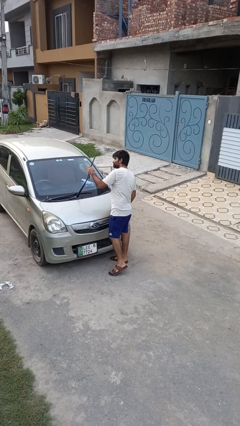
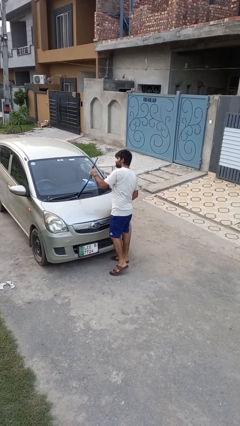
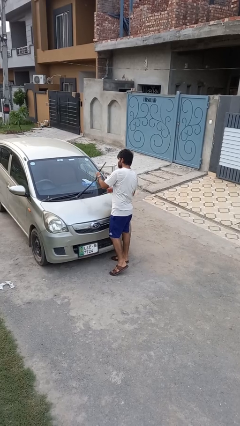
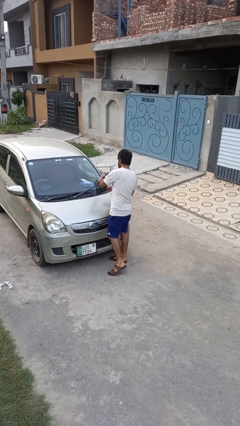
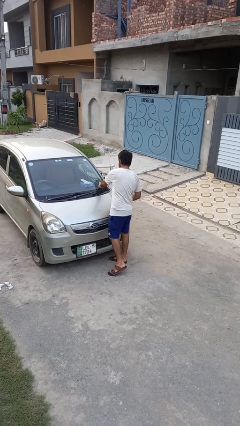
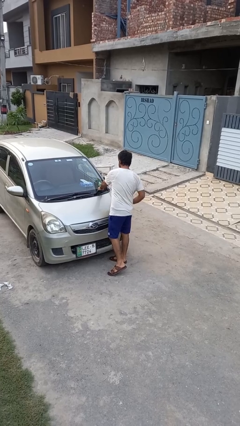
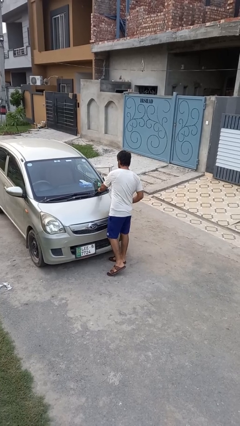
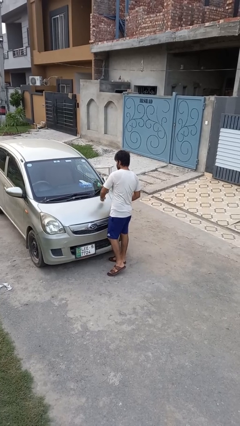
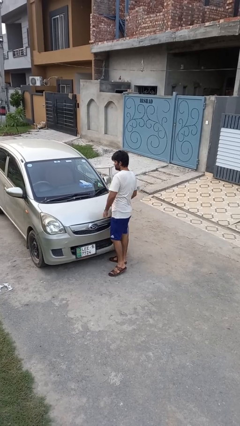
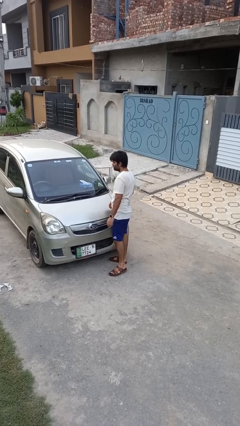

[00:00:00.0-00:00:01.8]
person flips down car wipers

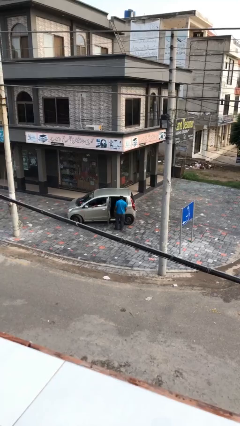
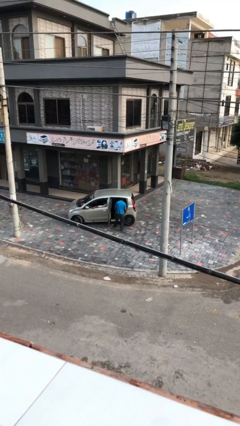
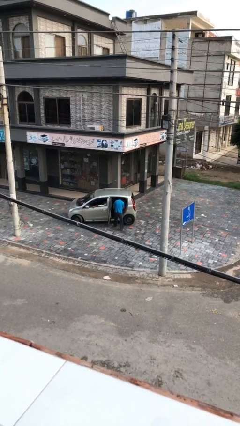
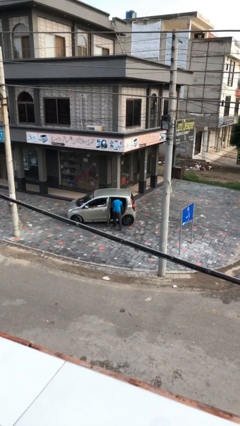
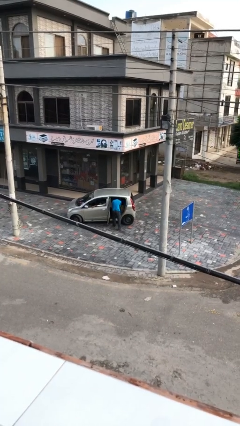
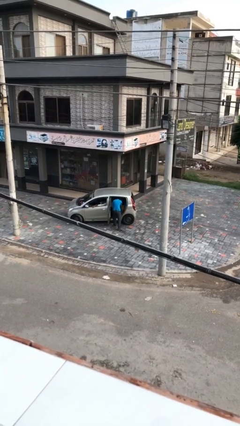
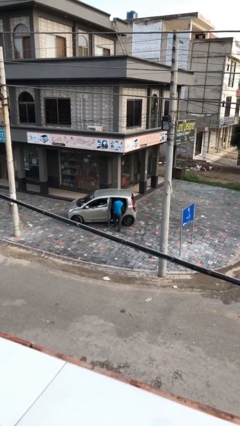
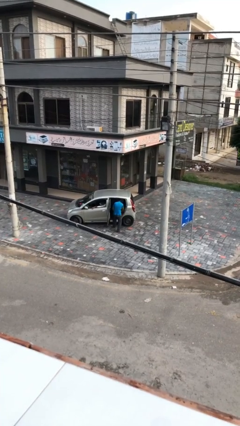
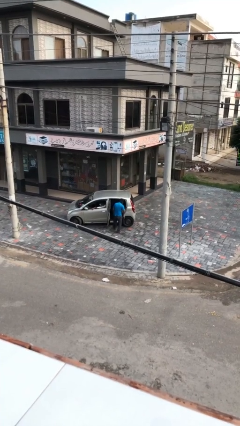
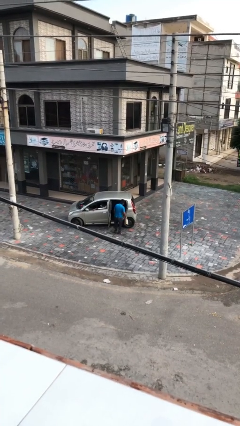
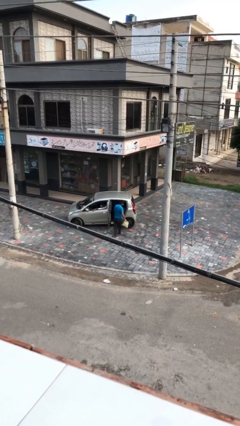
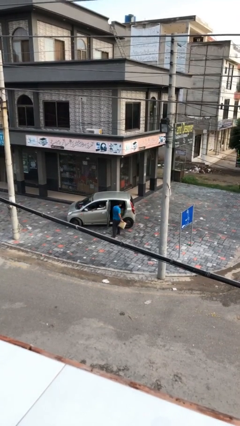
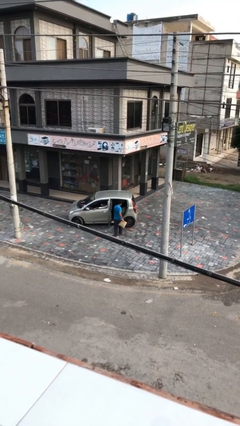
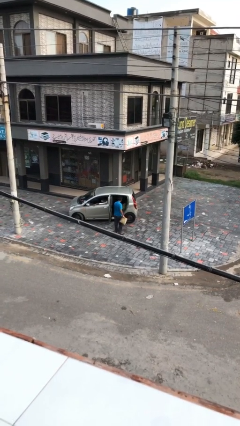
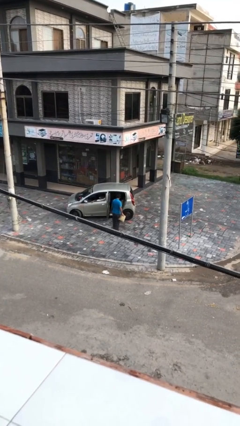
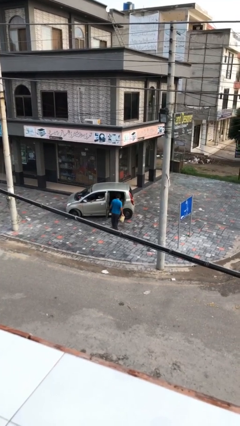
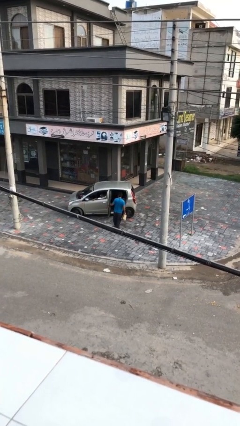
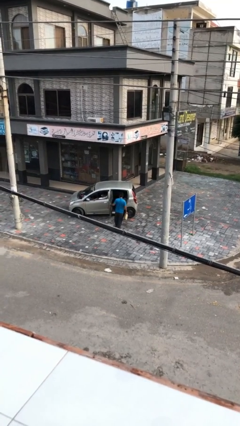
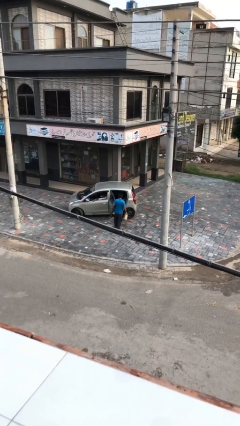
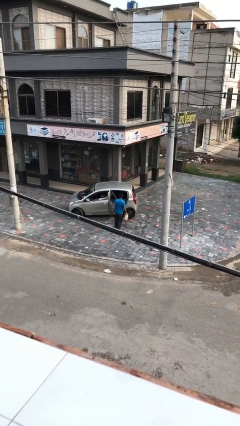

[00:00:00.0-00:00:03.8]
person unloads car

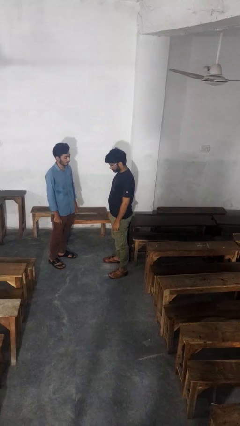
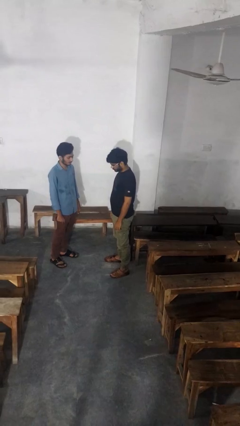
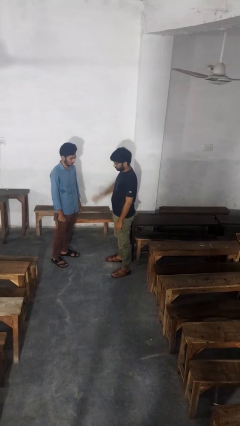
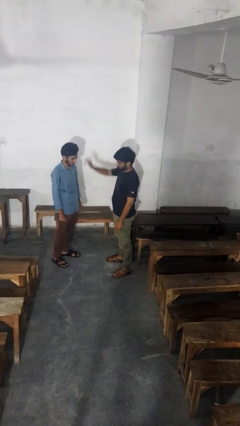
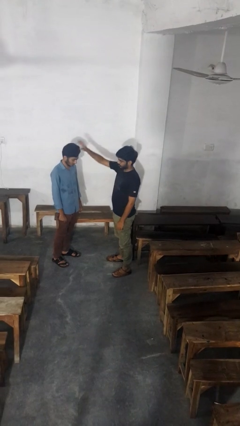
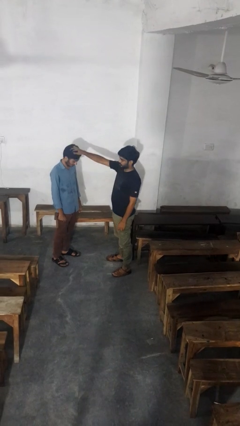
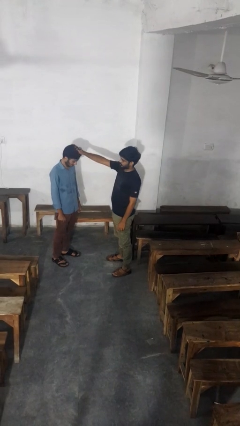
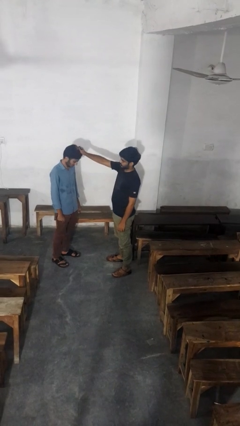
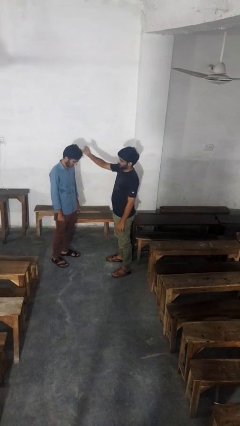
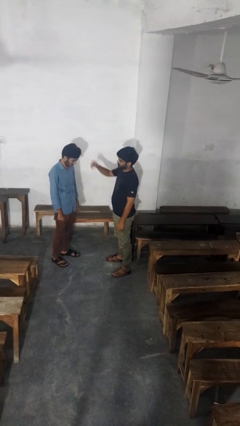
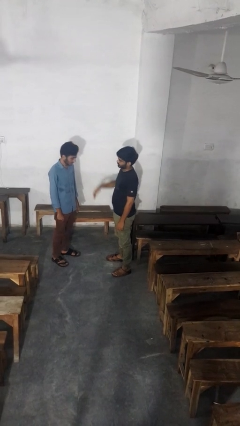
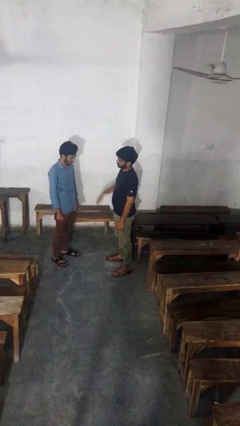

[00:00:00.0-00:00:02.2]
person grabs person by hair

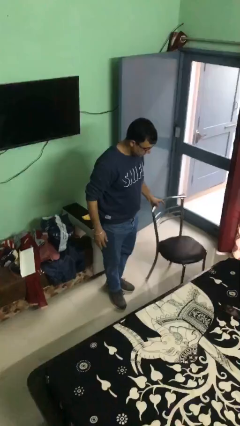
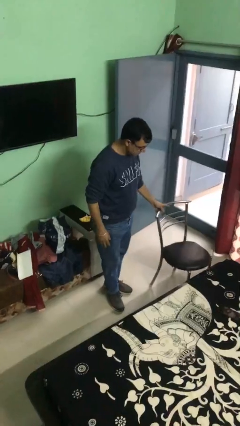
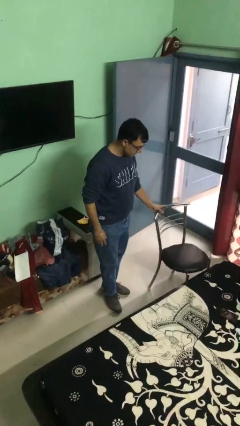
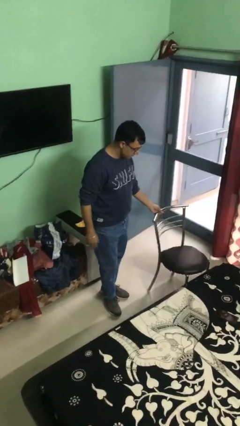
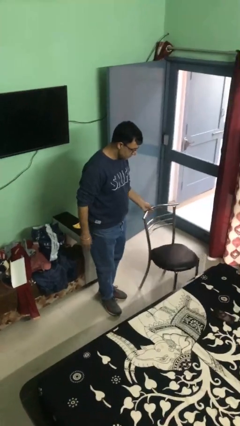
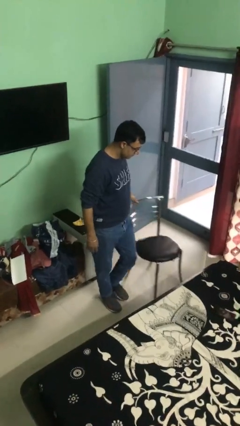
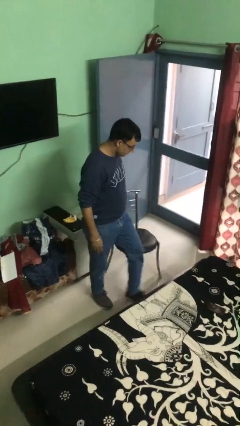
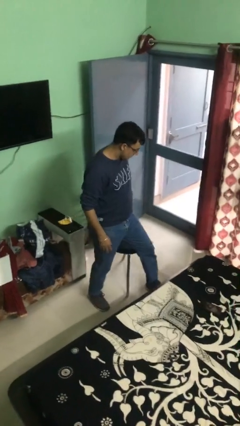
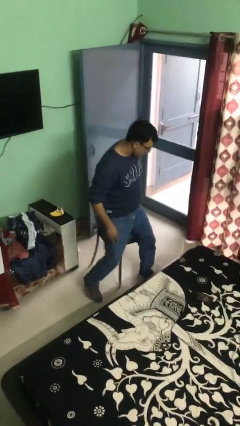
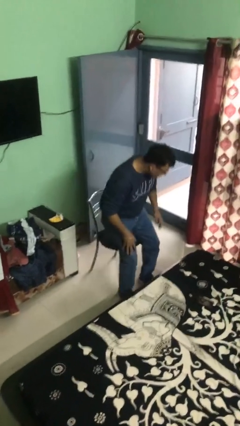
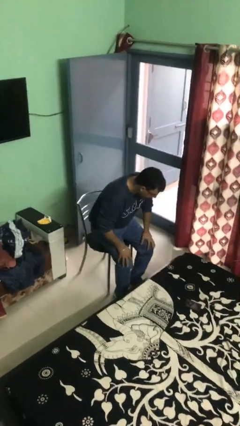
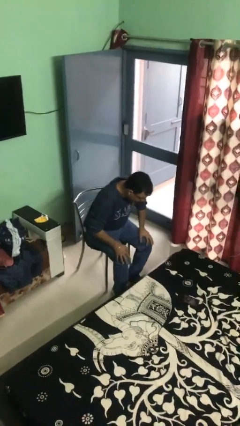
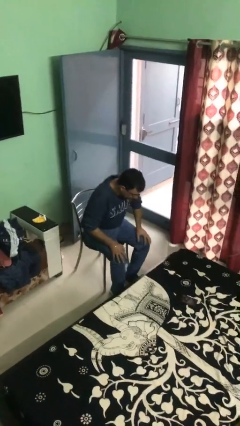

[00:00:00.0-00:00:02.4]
person sits down

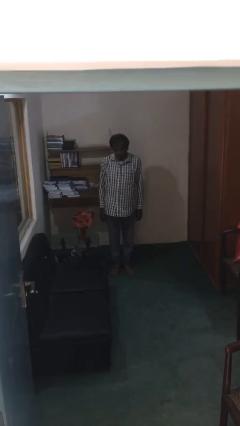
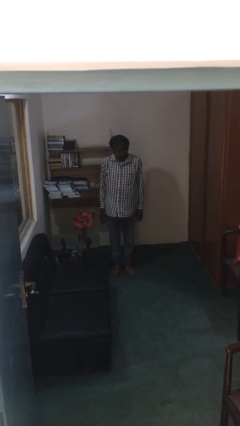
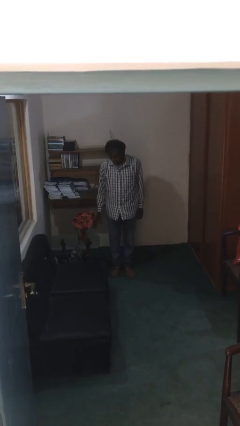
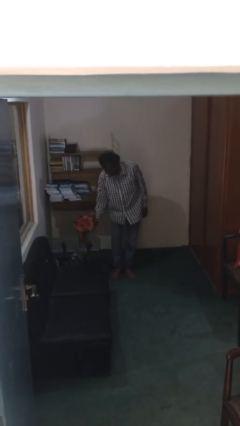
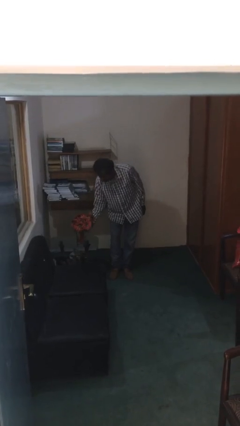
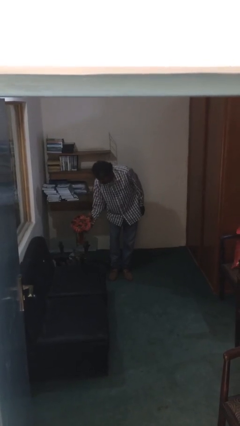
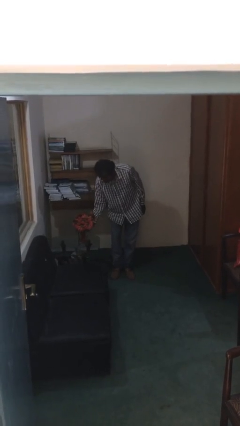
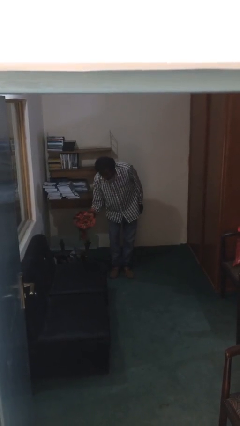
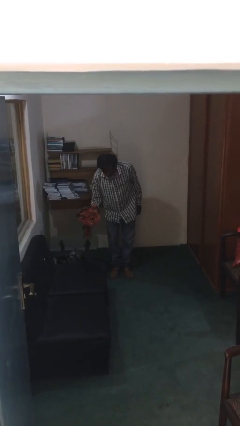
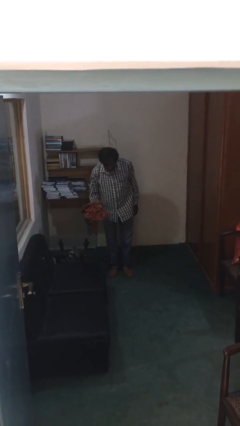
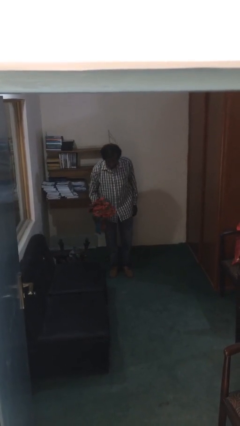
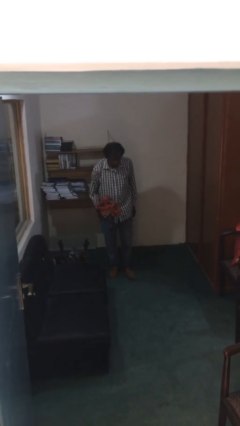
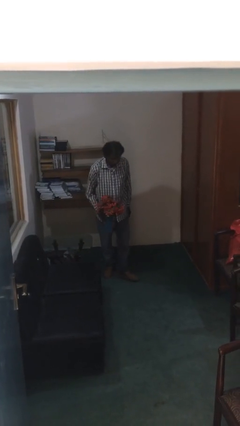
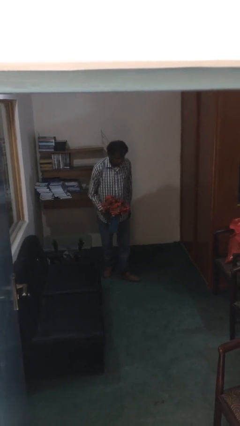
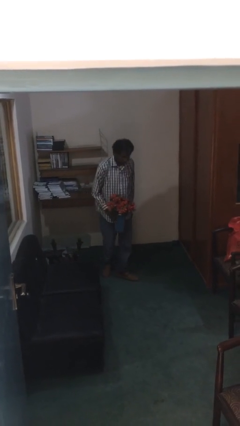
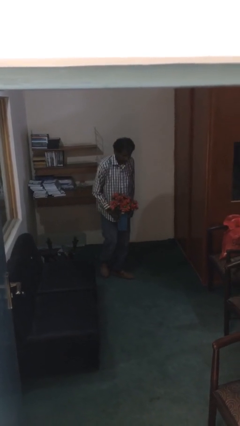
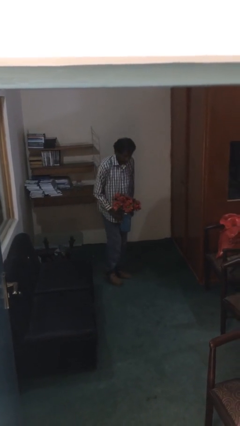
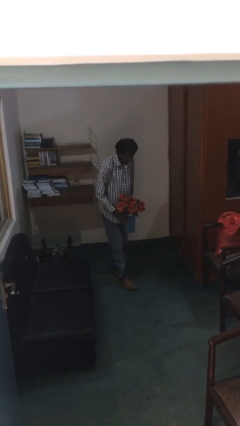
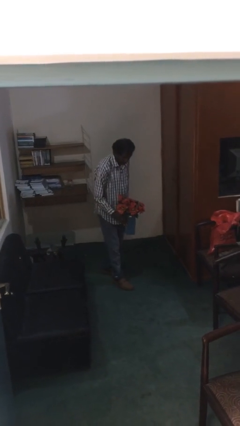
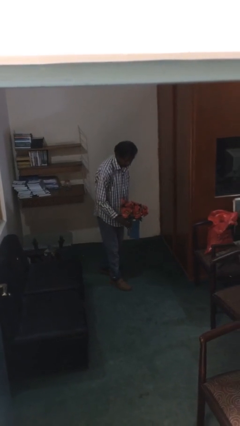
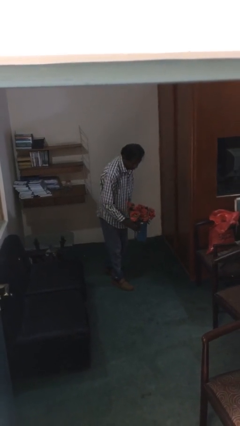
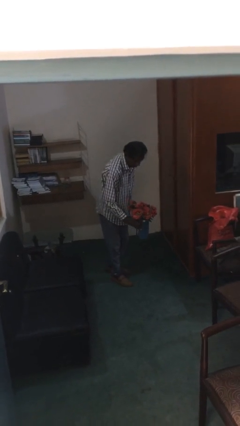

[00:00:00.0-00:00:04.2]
person picks up object from table

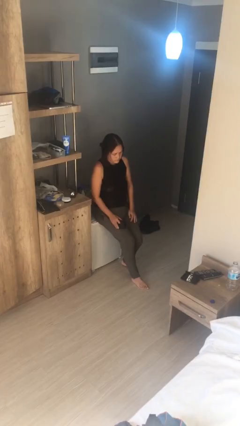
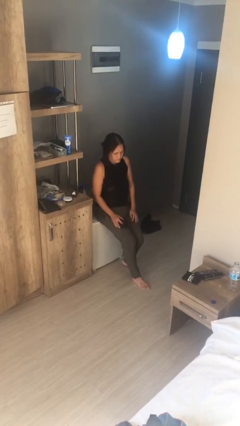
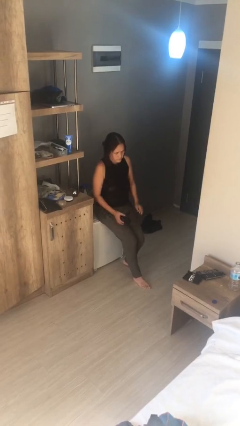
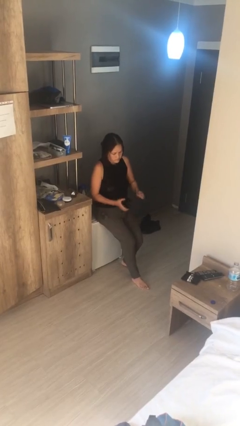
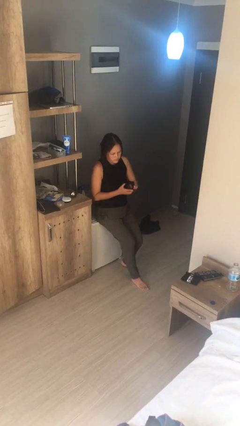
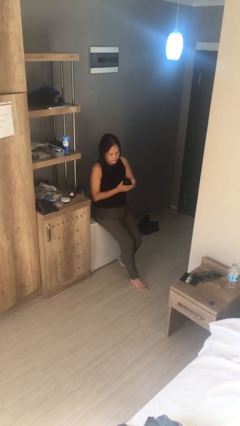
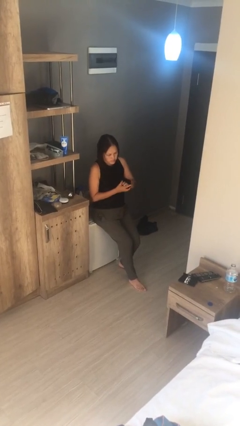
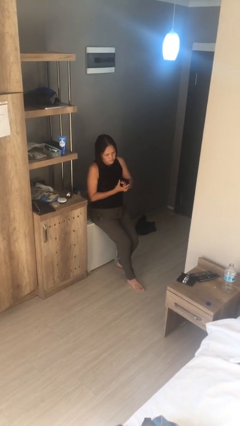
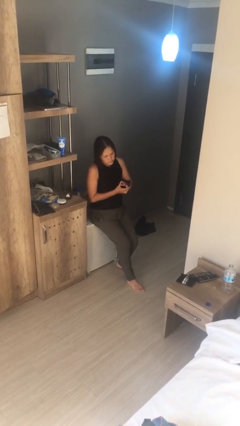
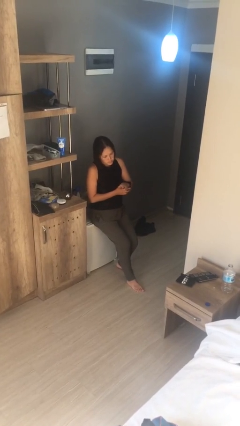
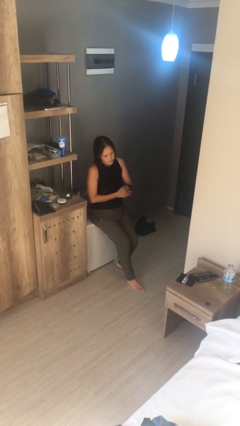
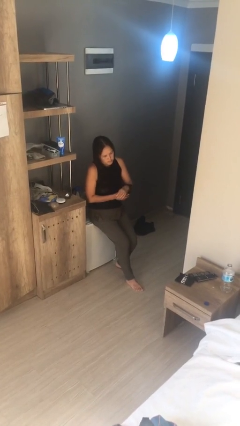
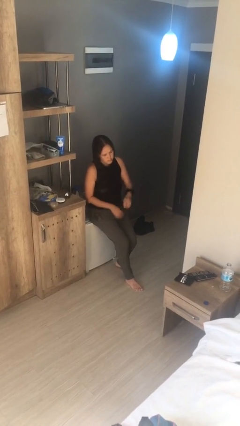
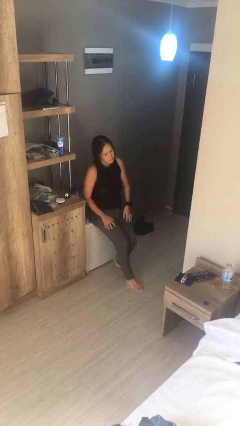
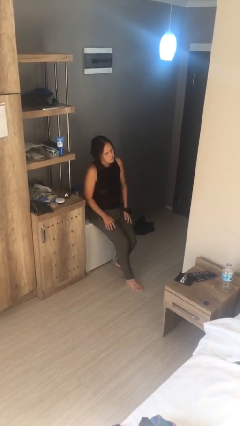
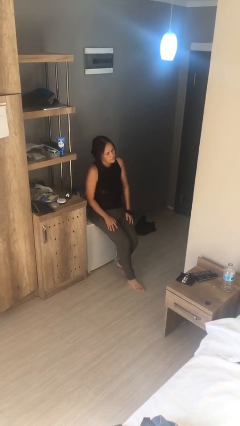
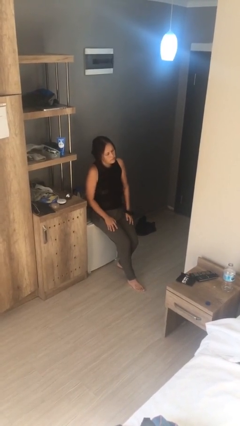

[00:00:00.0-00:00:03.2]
person puts on wristwatch
